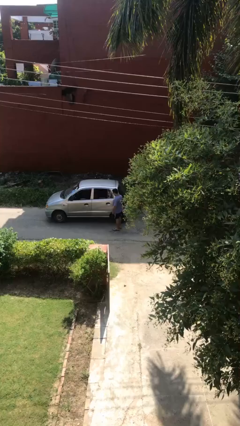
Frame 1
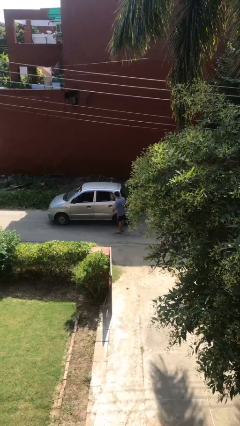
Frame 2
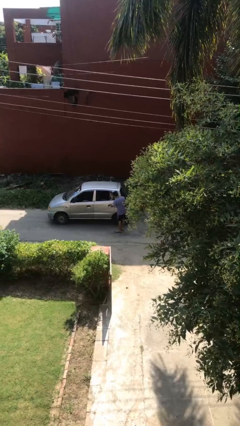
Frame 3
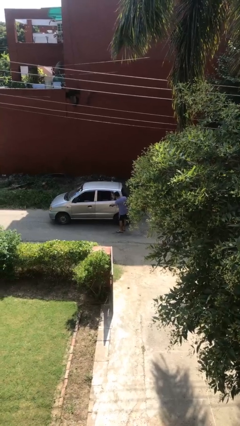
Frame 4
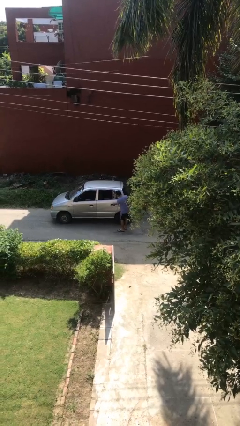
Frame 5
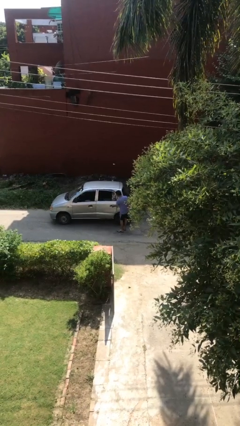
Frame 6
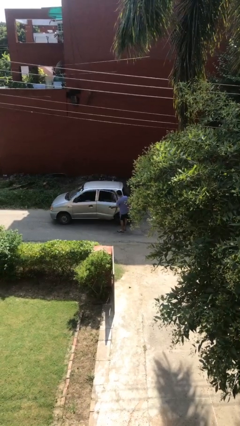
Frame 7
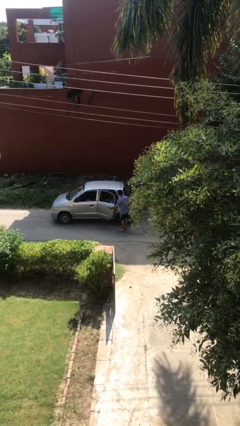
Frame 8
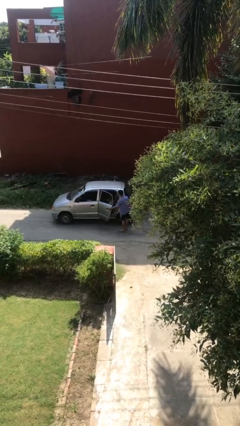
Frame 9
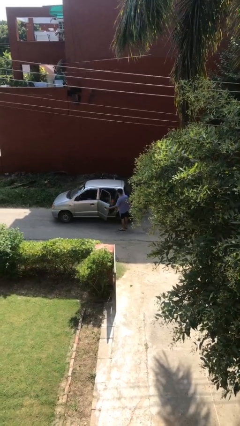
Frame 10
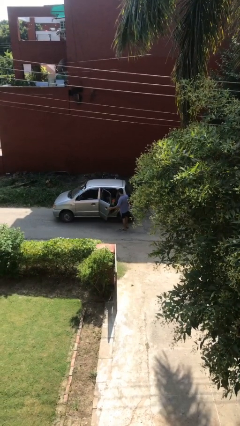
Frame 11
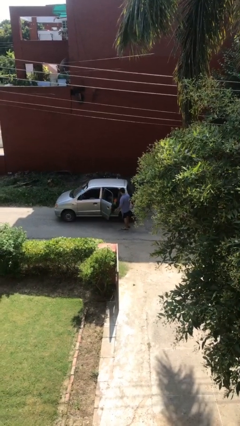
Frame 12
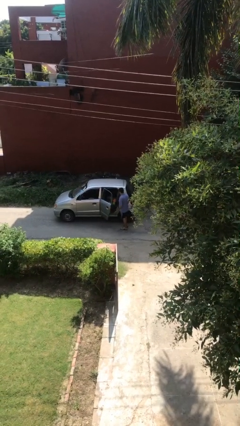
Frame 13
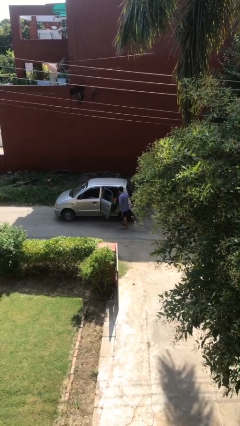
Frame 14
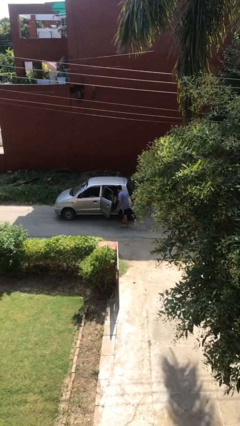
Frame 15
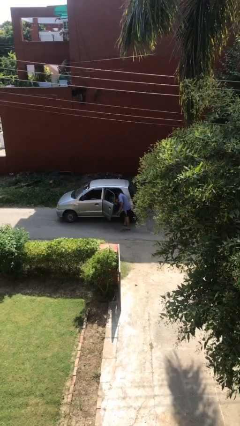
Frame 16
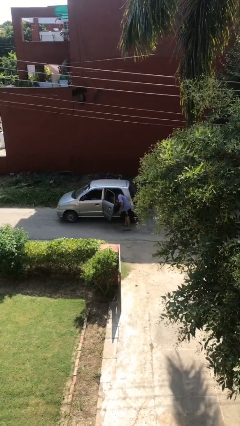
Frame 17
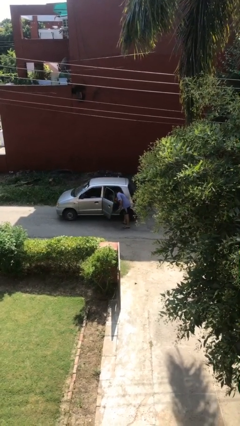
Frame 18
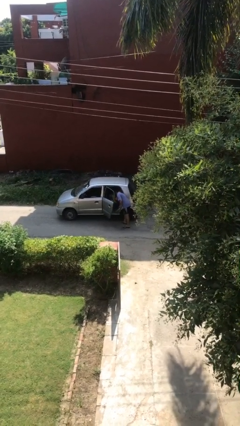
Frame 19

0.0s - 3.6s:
person opens car door

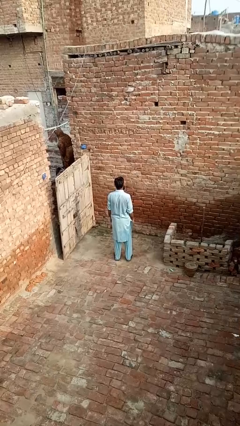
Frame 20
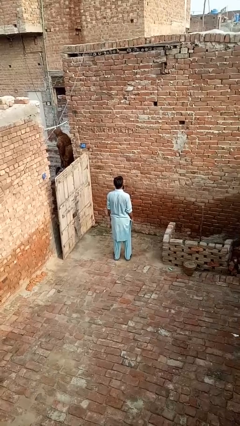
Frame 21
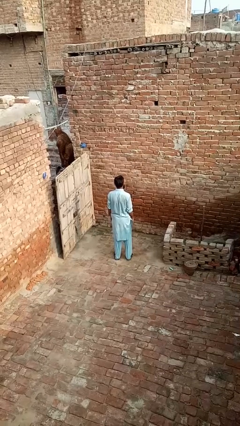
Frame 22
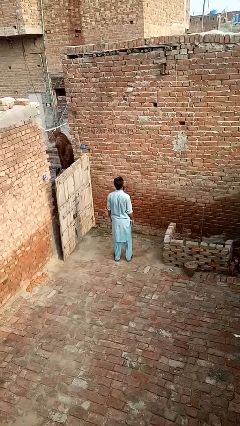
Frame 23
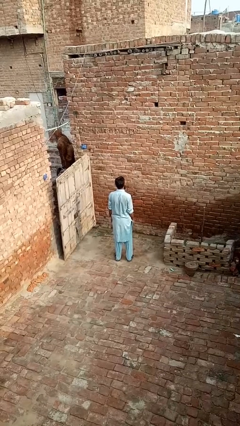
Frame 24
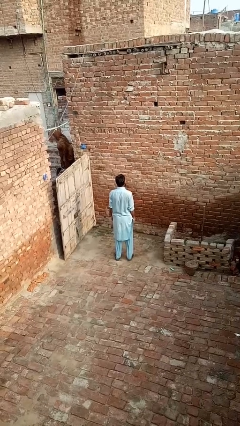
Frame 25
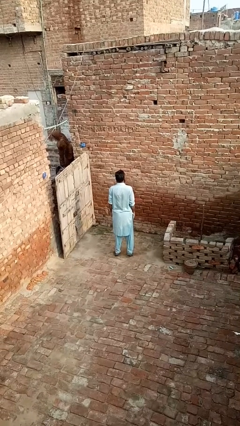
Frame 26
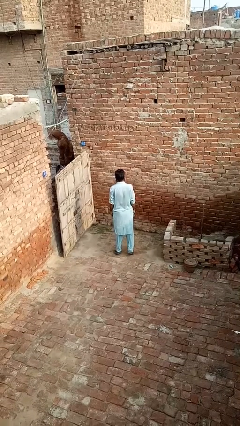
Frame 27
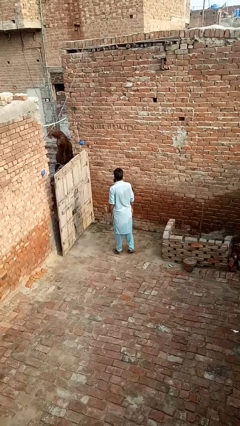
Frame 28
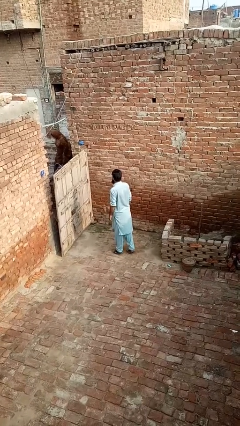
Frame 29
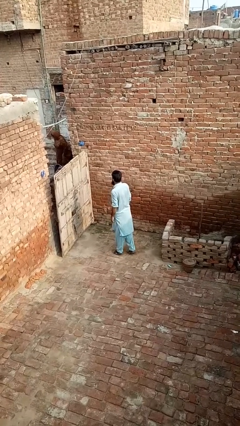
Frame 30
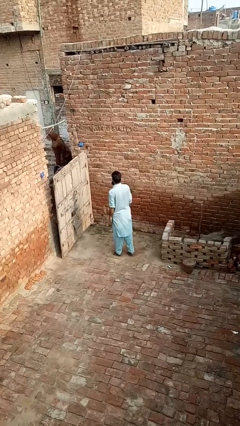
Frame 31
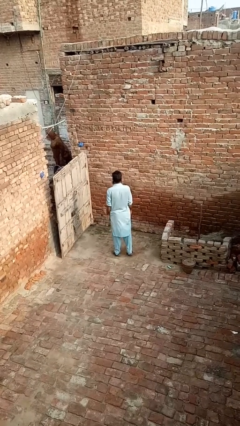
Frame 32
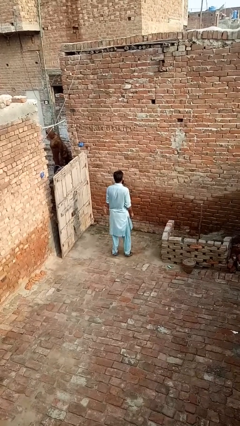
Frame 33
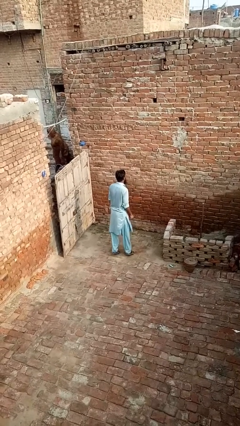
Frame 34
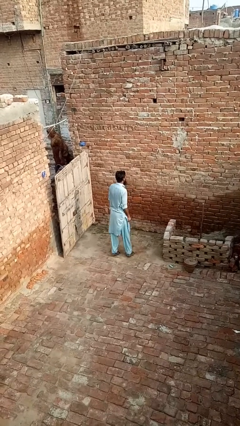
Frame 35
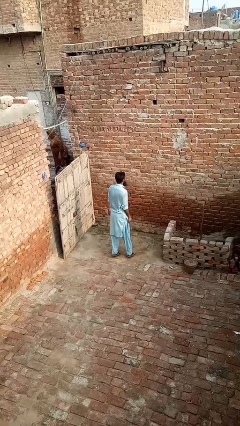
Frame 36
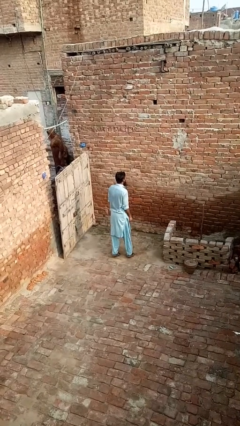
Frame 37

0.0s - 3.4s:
person twirls

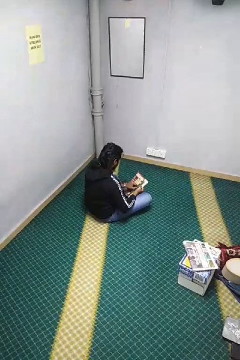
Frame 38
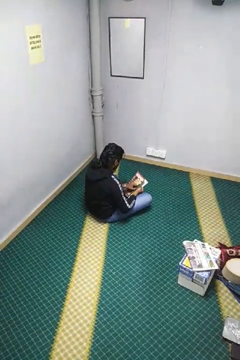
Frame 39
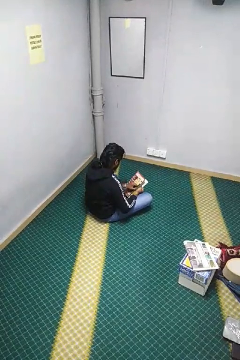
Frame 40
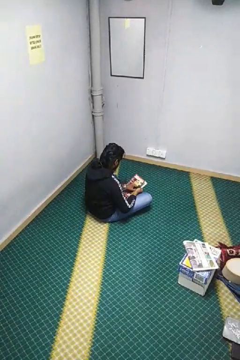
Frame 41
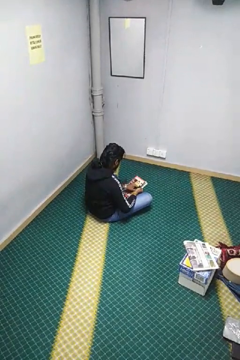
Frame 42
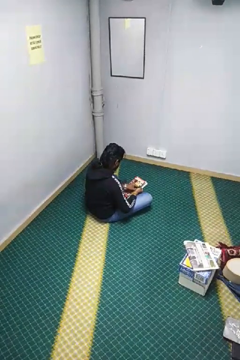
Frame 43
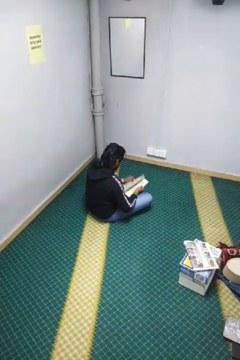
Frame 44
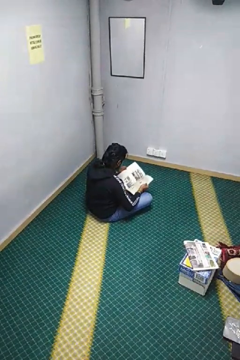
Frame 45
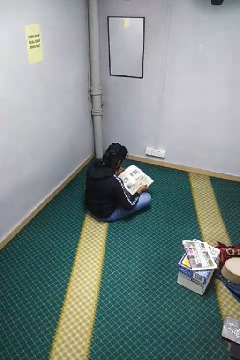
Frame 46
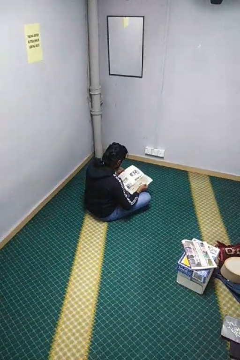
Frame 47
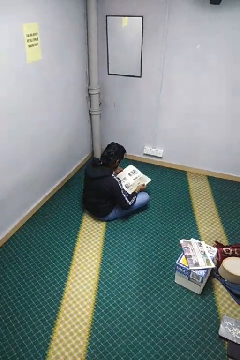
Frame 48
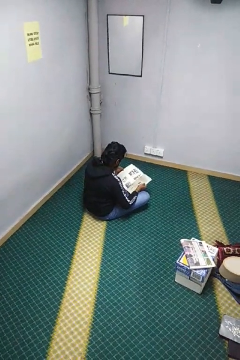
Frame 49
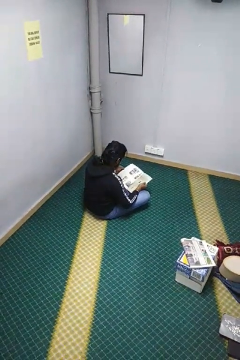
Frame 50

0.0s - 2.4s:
person reads magazine

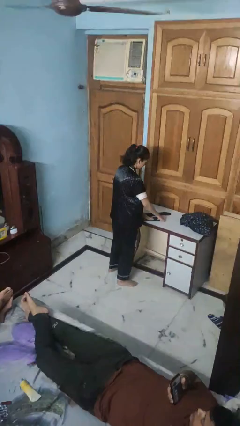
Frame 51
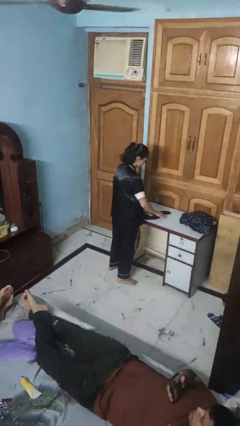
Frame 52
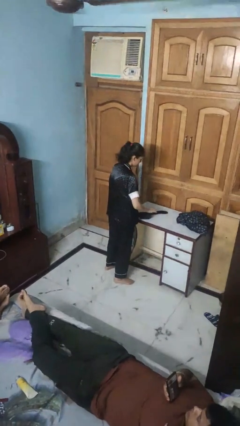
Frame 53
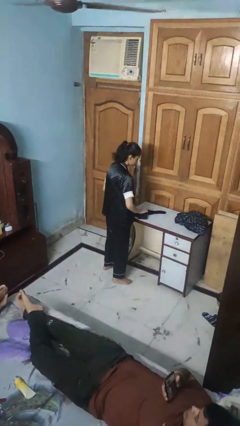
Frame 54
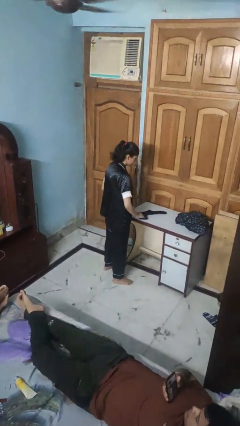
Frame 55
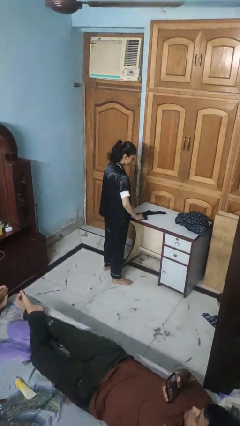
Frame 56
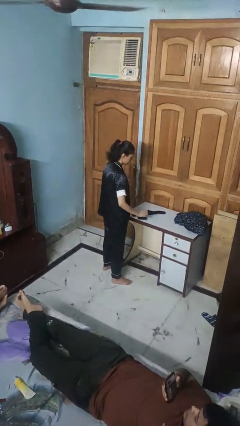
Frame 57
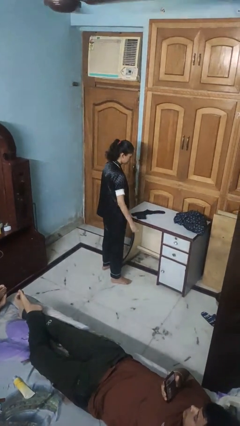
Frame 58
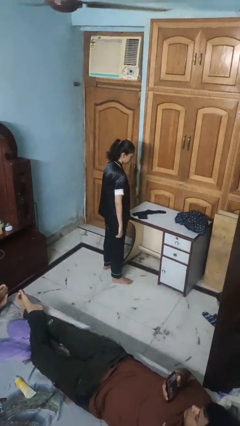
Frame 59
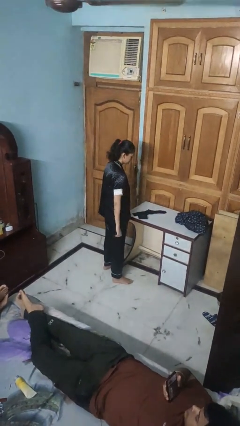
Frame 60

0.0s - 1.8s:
person folds socks

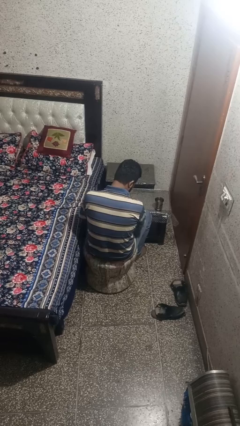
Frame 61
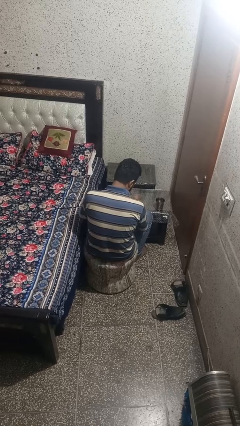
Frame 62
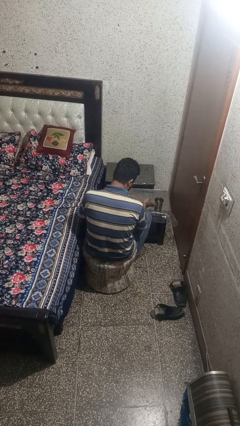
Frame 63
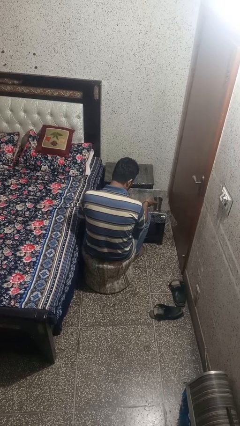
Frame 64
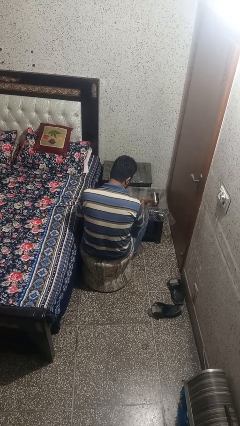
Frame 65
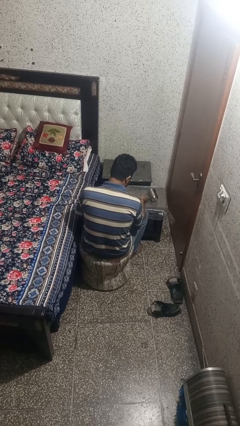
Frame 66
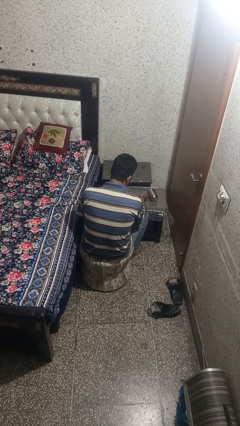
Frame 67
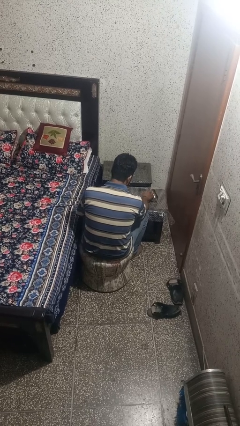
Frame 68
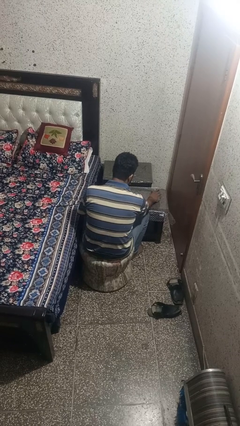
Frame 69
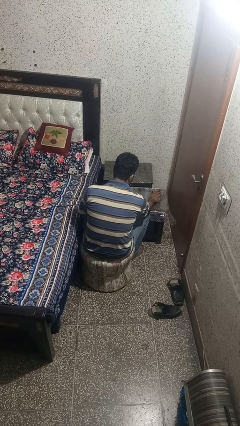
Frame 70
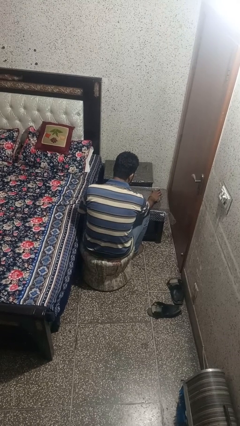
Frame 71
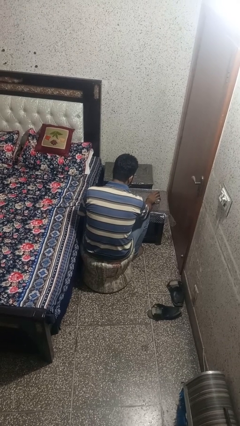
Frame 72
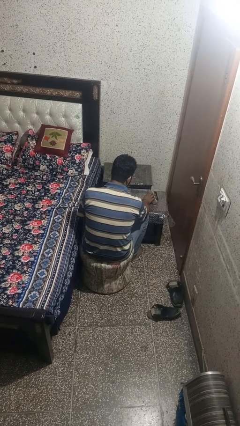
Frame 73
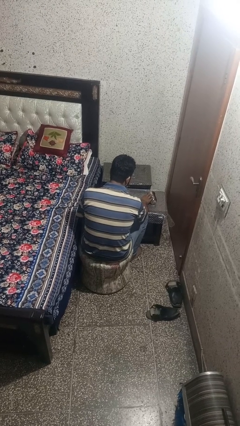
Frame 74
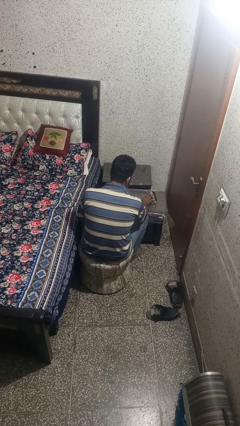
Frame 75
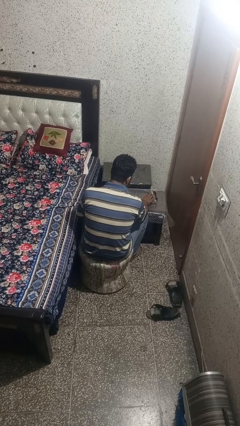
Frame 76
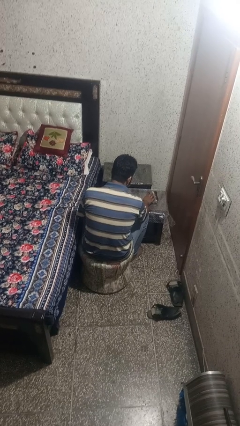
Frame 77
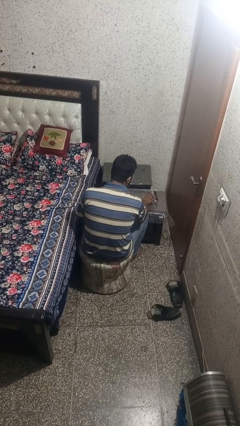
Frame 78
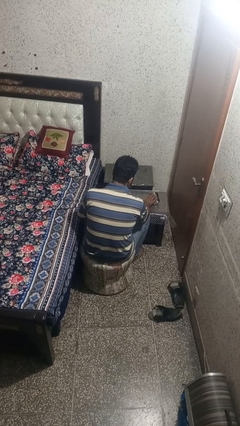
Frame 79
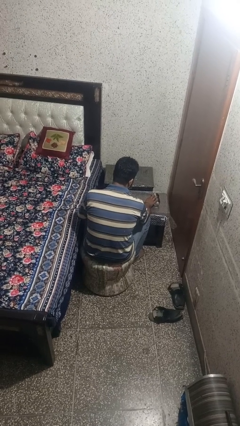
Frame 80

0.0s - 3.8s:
person knocks over glass

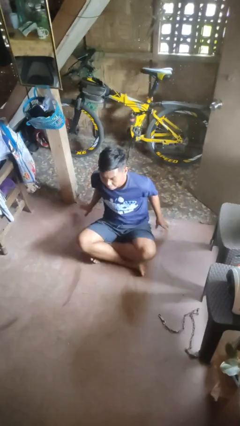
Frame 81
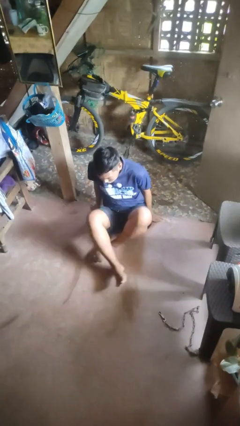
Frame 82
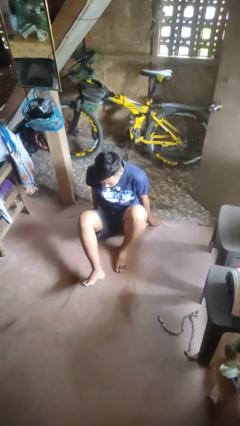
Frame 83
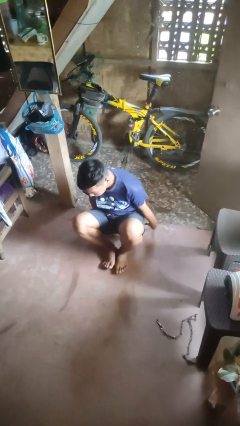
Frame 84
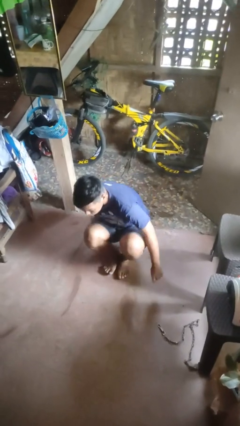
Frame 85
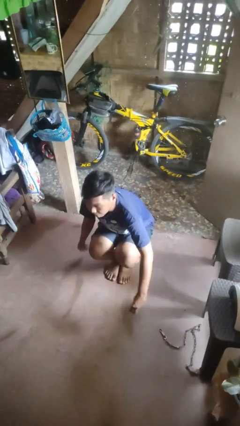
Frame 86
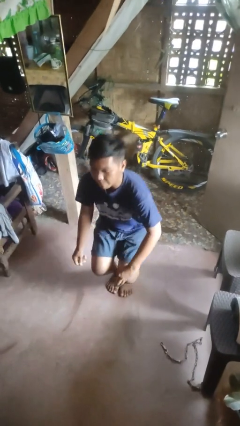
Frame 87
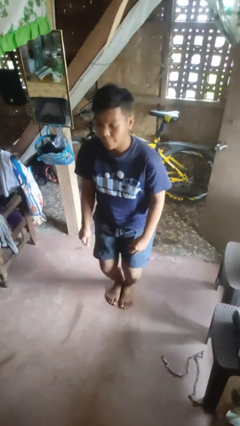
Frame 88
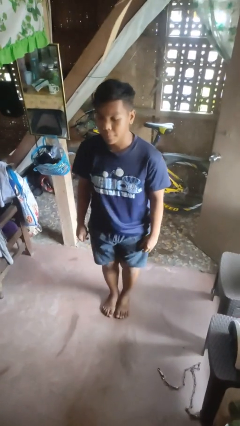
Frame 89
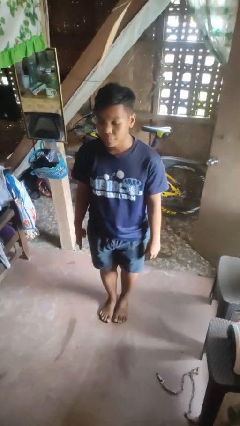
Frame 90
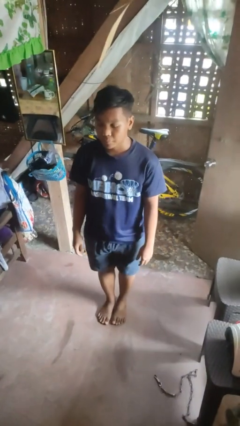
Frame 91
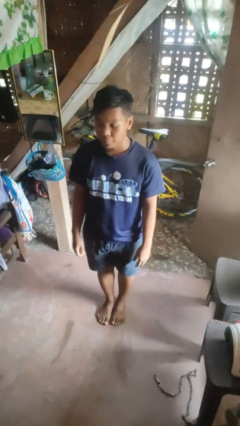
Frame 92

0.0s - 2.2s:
person stands up from floor

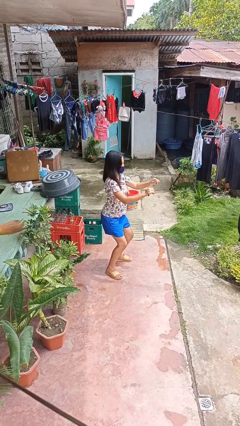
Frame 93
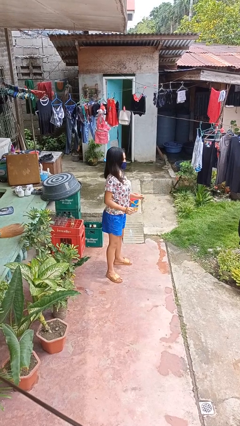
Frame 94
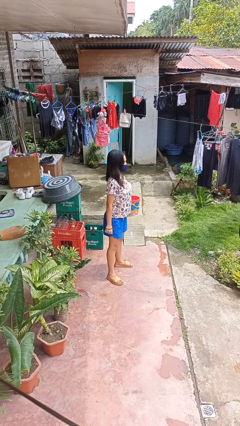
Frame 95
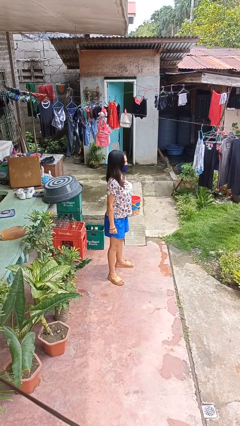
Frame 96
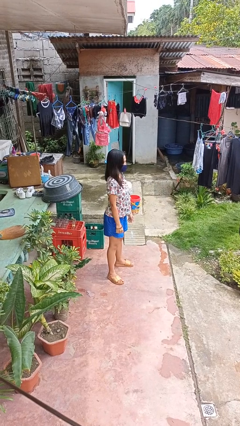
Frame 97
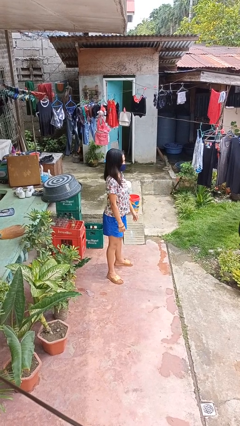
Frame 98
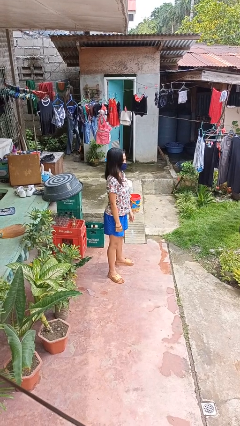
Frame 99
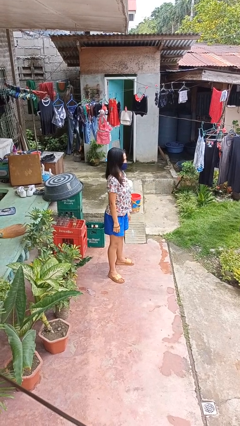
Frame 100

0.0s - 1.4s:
person stands up
